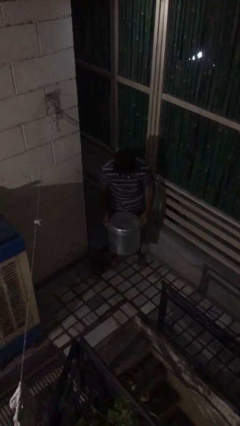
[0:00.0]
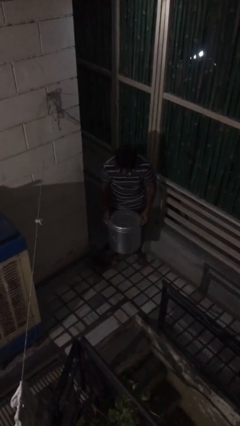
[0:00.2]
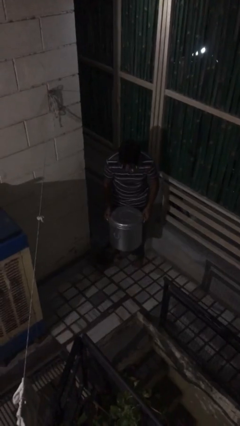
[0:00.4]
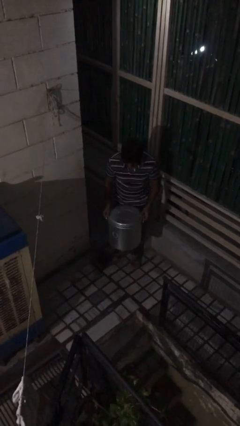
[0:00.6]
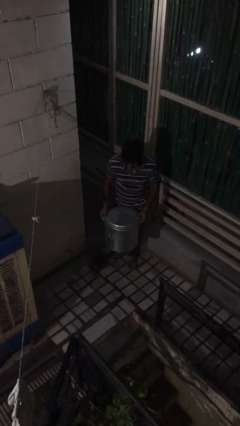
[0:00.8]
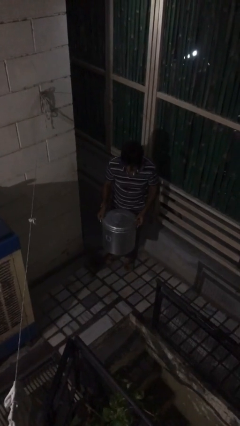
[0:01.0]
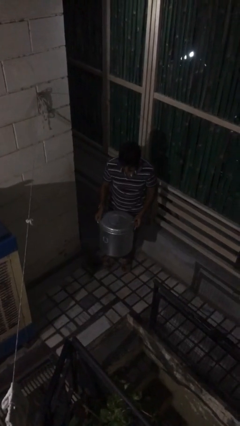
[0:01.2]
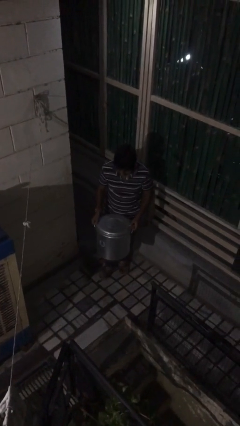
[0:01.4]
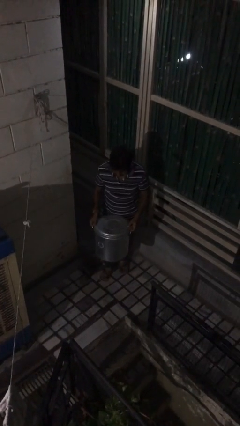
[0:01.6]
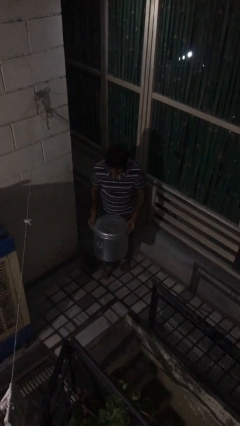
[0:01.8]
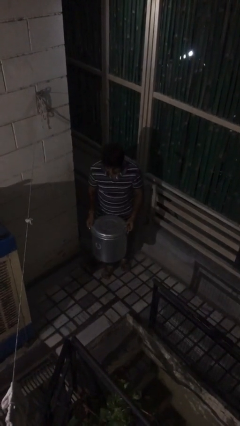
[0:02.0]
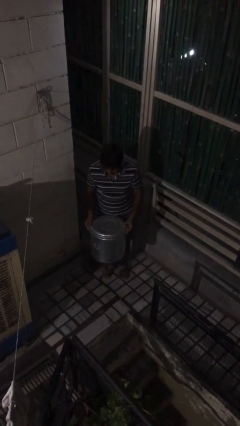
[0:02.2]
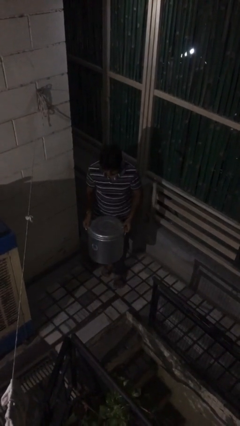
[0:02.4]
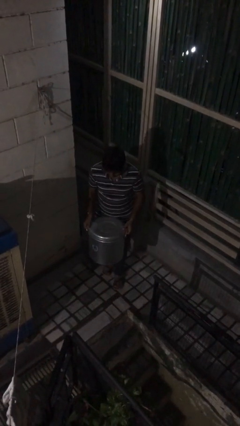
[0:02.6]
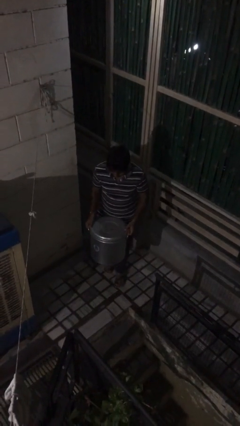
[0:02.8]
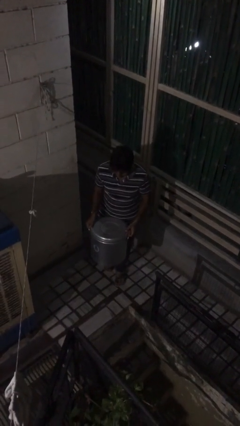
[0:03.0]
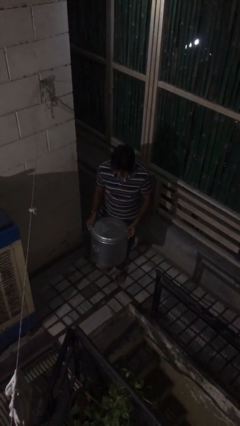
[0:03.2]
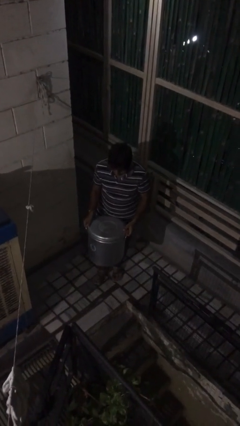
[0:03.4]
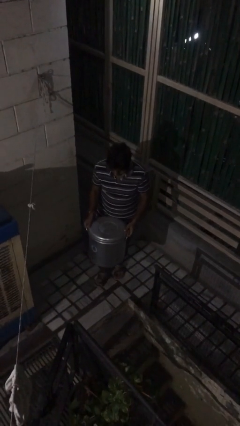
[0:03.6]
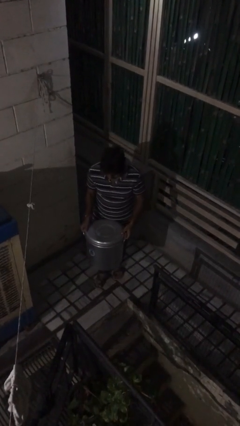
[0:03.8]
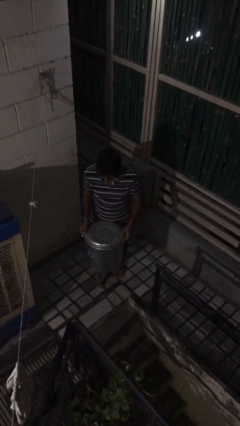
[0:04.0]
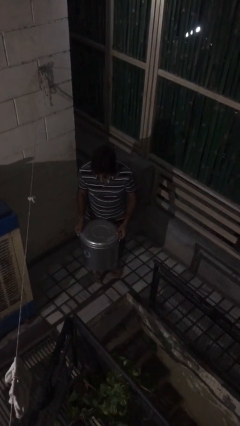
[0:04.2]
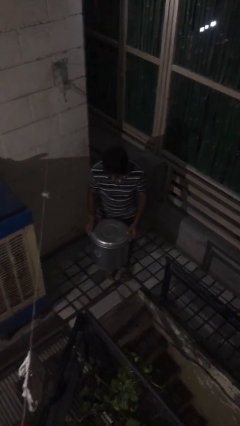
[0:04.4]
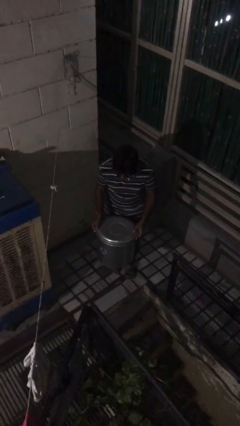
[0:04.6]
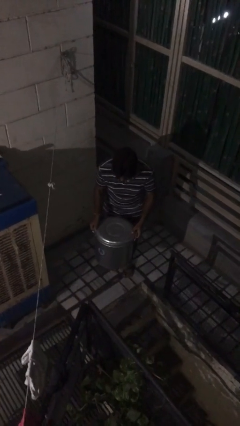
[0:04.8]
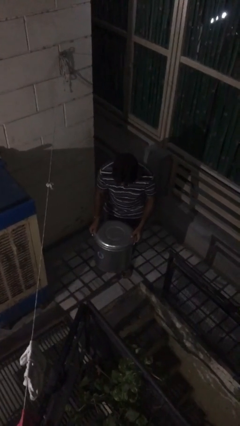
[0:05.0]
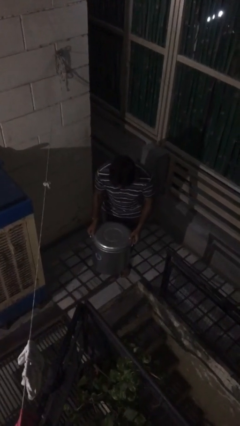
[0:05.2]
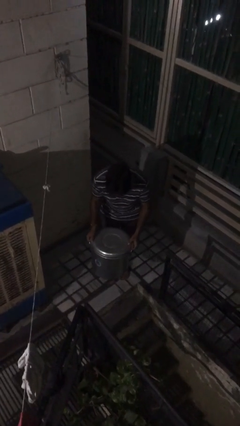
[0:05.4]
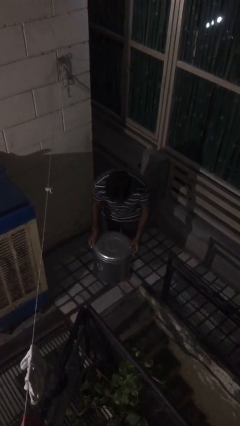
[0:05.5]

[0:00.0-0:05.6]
person carries heavy object

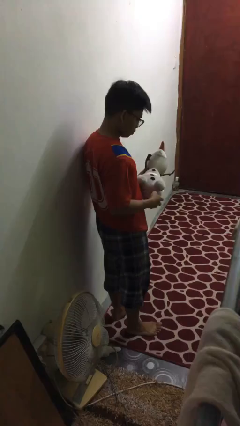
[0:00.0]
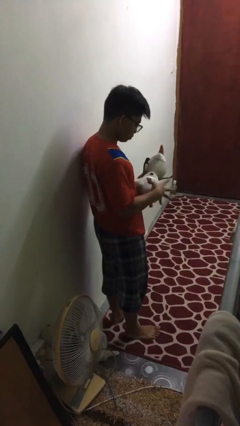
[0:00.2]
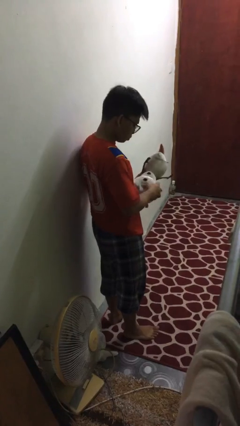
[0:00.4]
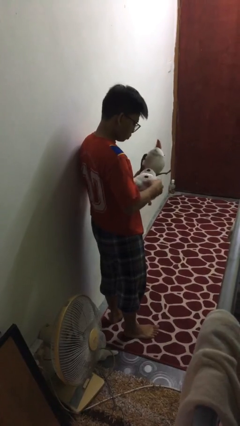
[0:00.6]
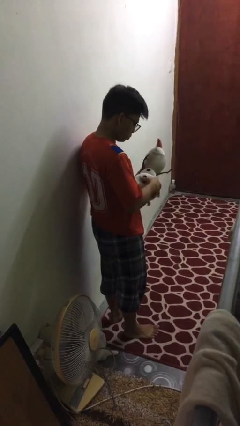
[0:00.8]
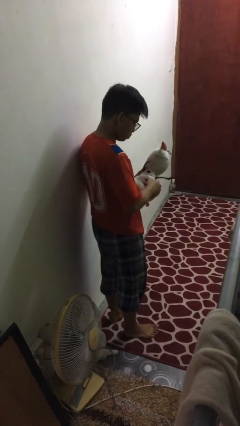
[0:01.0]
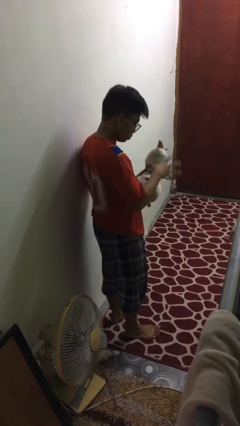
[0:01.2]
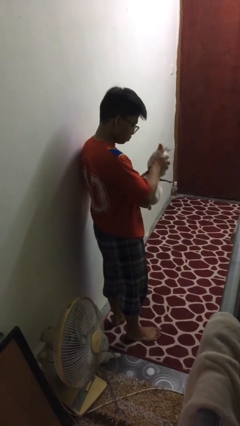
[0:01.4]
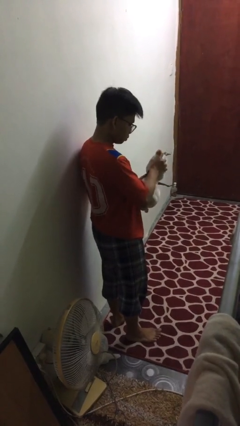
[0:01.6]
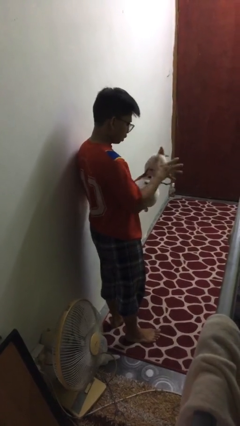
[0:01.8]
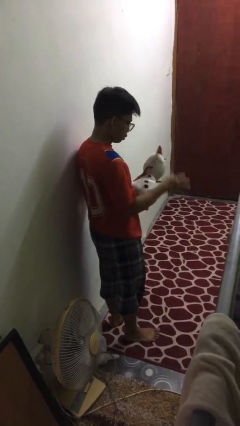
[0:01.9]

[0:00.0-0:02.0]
person squeezes object

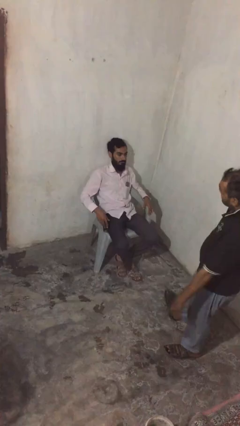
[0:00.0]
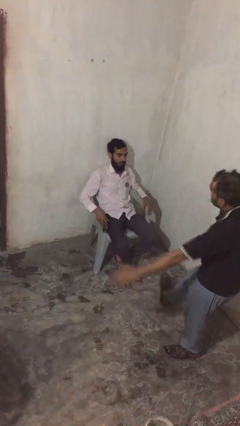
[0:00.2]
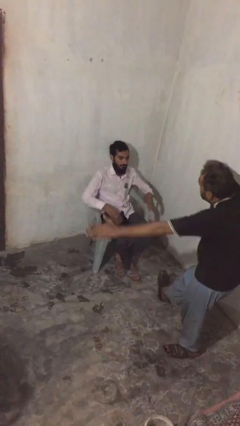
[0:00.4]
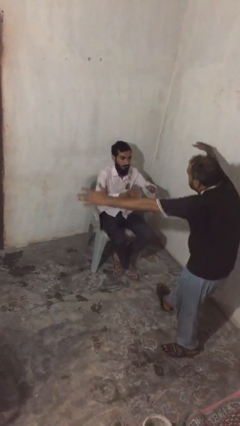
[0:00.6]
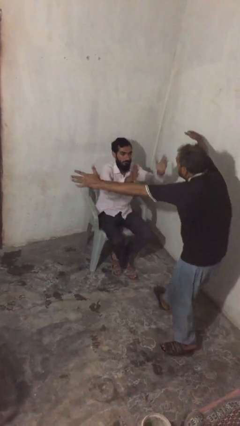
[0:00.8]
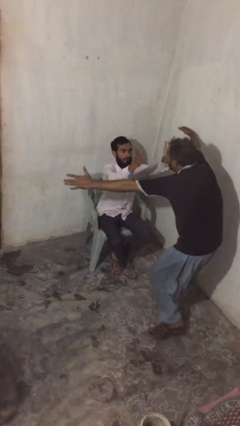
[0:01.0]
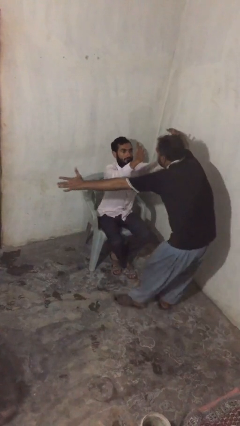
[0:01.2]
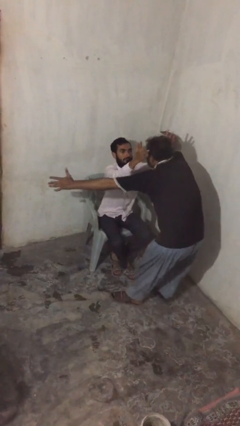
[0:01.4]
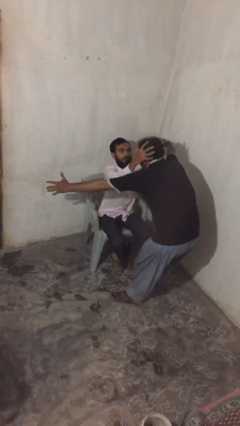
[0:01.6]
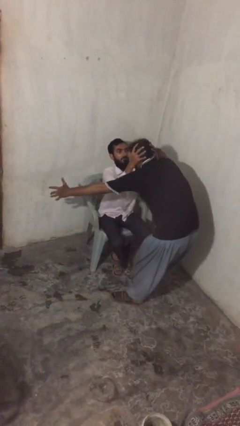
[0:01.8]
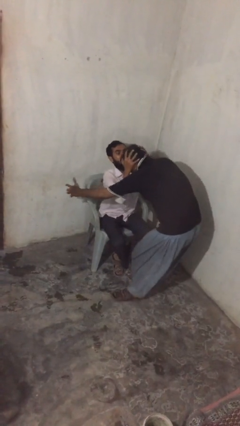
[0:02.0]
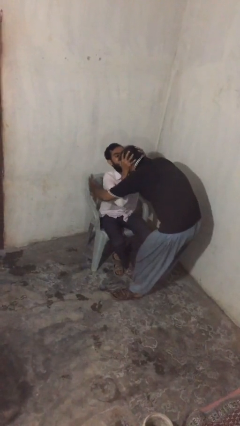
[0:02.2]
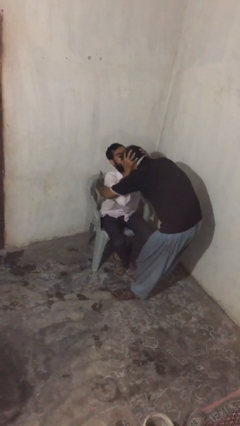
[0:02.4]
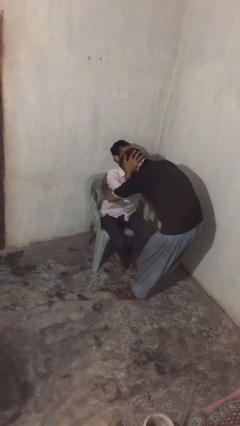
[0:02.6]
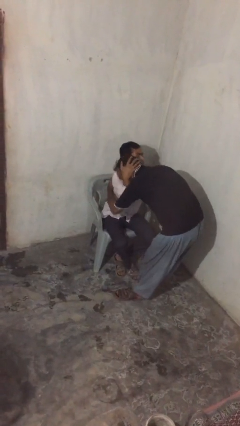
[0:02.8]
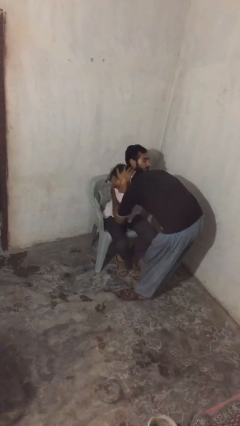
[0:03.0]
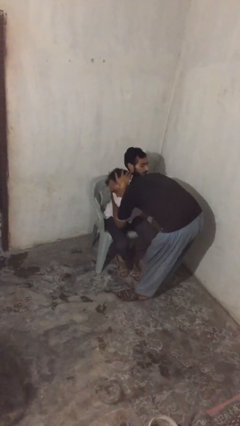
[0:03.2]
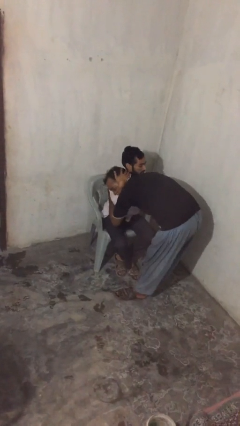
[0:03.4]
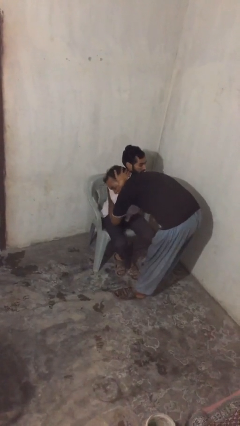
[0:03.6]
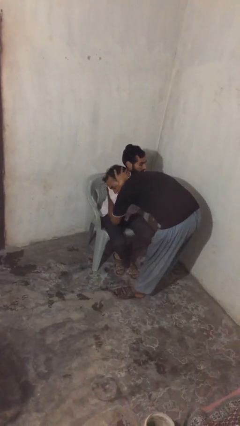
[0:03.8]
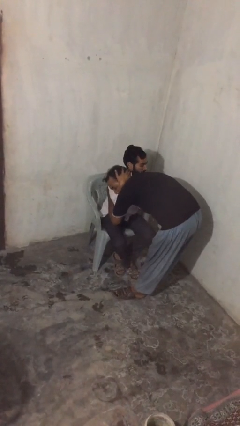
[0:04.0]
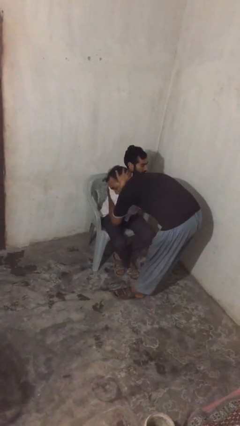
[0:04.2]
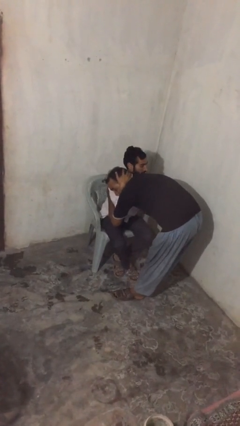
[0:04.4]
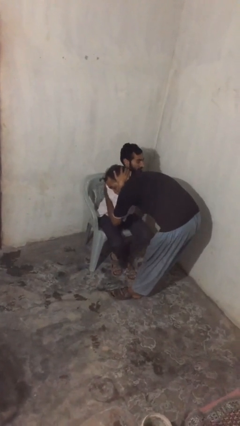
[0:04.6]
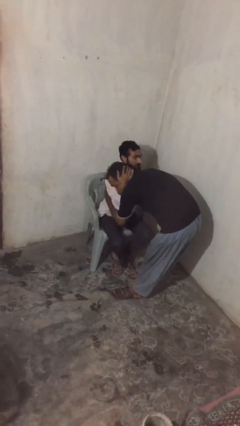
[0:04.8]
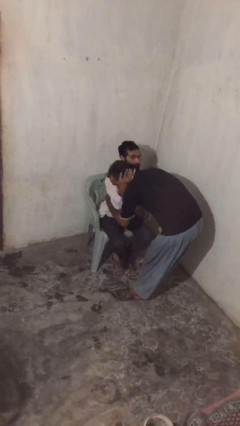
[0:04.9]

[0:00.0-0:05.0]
person embraces person

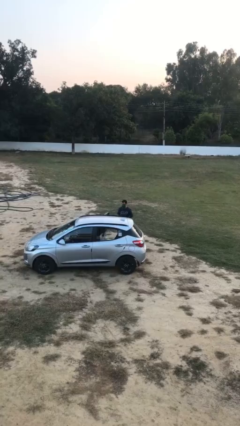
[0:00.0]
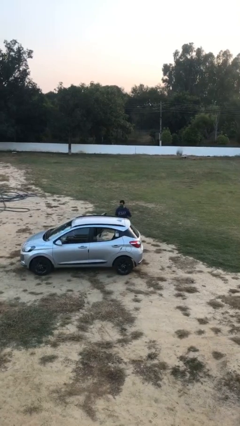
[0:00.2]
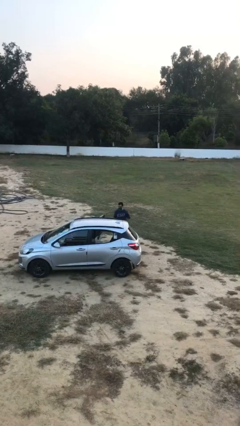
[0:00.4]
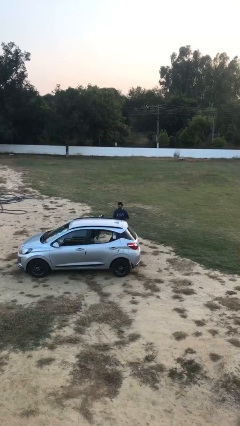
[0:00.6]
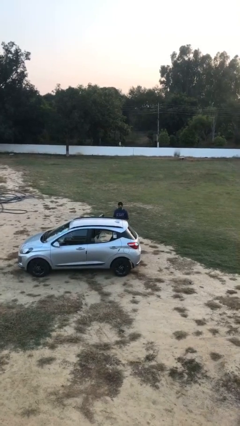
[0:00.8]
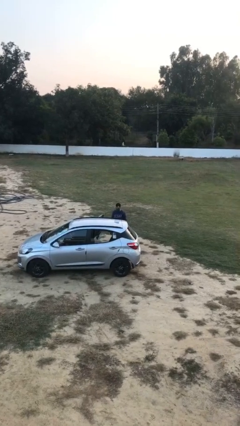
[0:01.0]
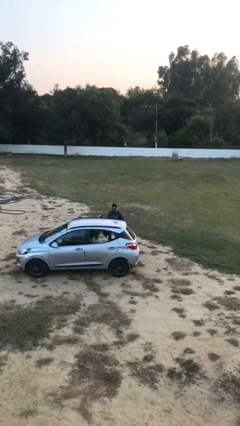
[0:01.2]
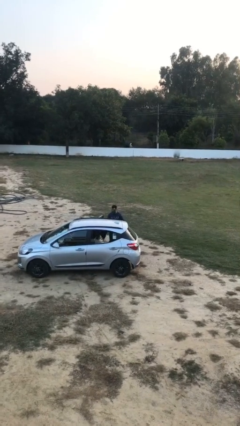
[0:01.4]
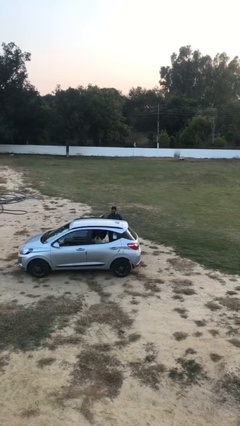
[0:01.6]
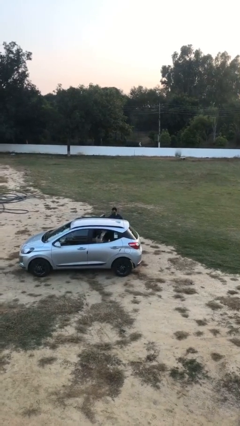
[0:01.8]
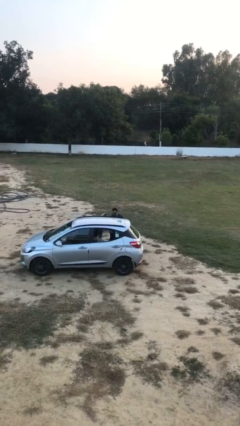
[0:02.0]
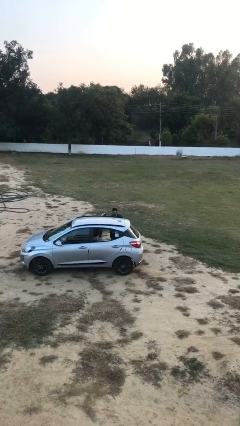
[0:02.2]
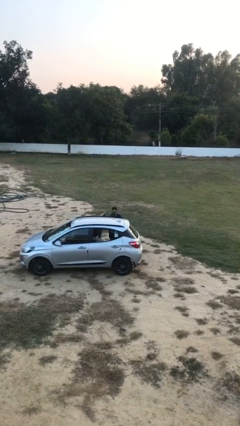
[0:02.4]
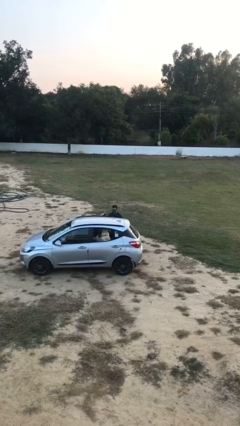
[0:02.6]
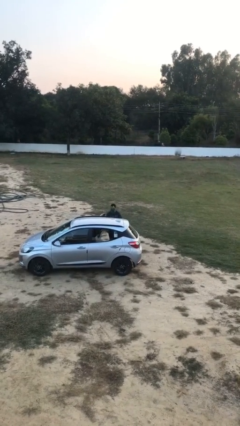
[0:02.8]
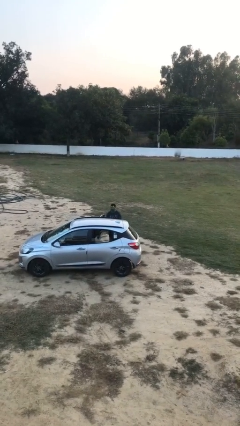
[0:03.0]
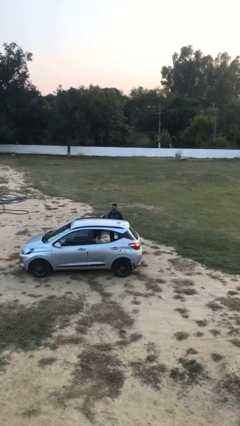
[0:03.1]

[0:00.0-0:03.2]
person loads car

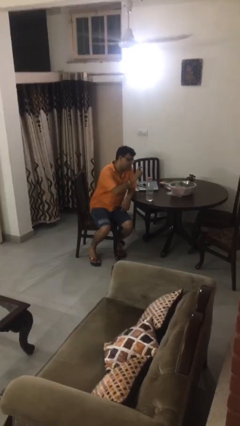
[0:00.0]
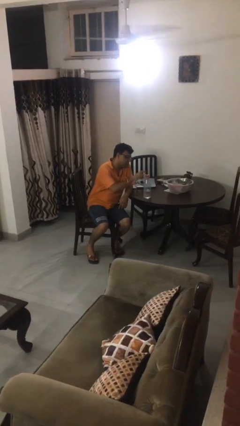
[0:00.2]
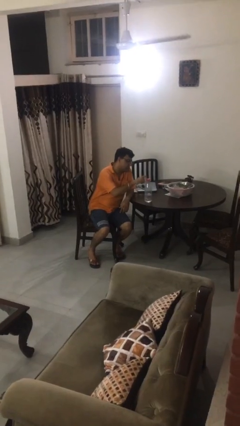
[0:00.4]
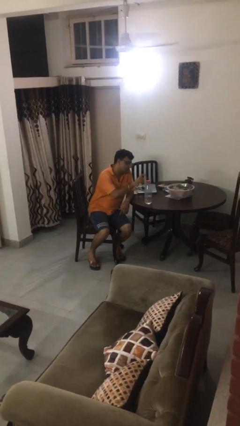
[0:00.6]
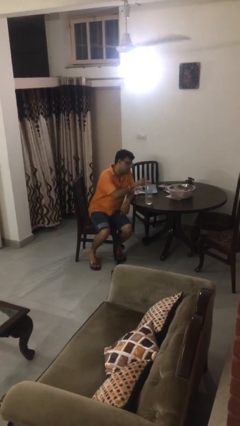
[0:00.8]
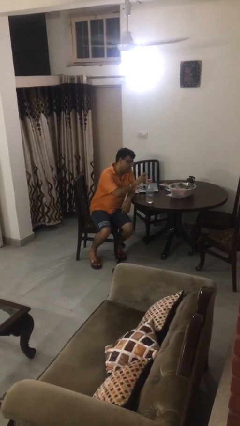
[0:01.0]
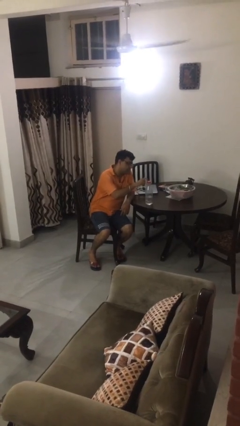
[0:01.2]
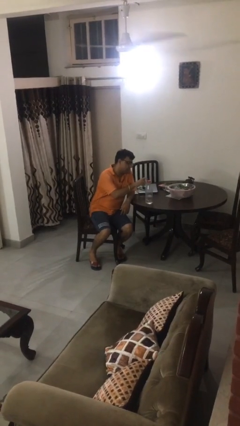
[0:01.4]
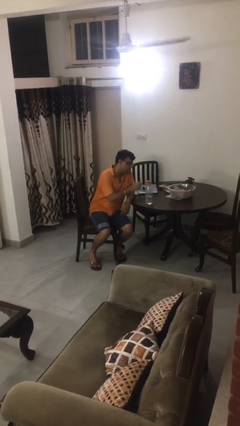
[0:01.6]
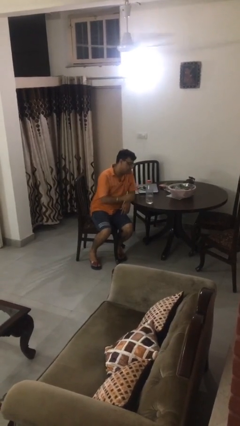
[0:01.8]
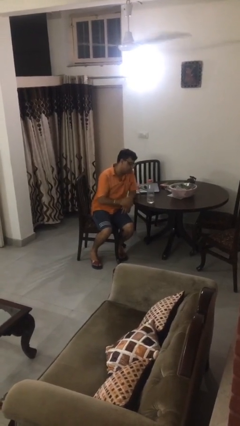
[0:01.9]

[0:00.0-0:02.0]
person taps object with finger
